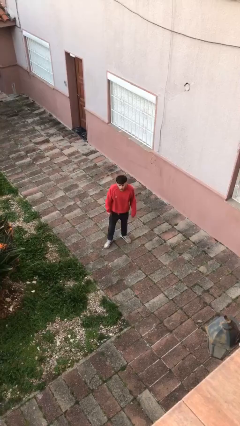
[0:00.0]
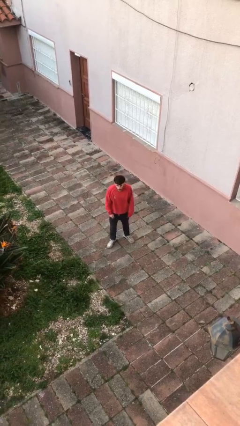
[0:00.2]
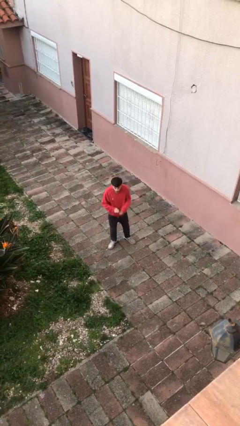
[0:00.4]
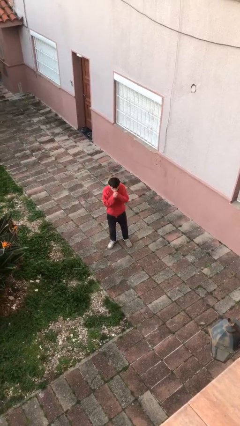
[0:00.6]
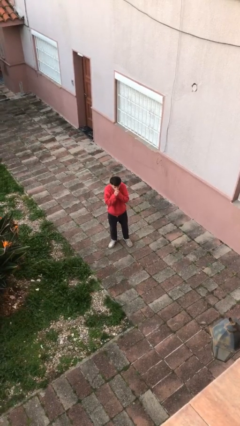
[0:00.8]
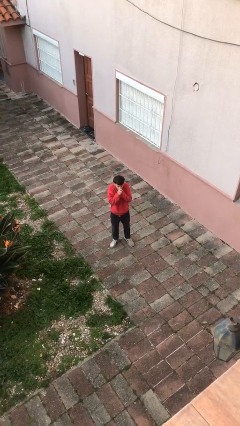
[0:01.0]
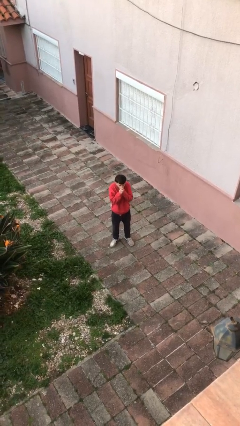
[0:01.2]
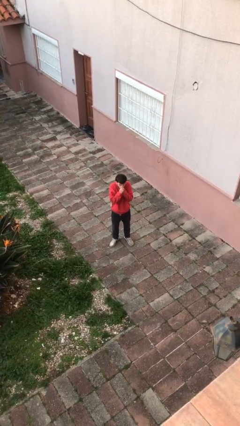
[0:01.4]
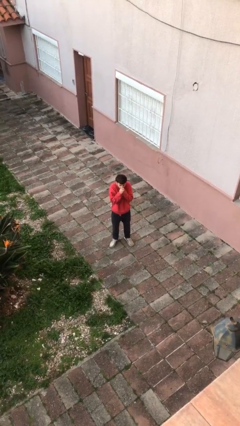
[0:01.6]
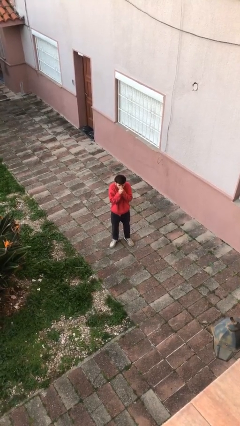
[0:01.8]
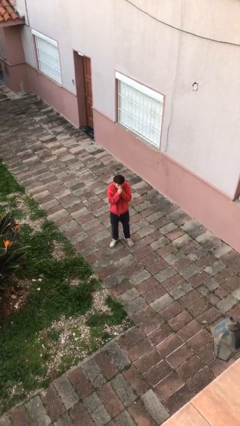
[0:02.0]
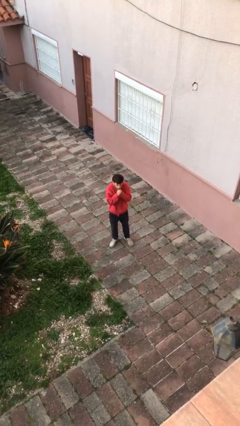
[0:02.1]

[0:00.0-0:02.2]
person blows into hands

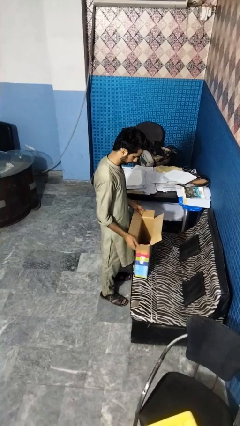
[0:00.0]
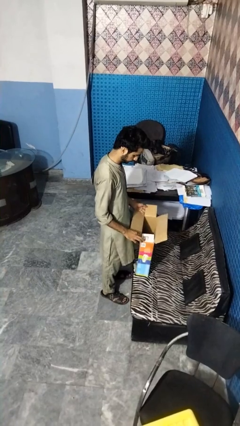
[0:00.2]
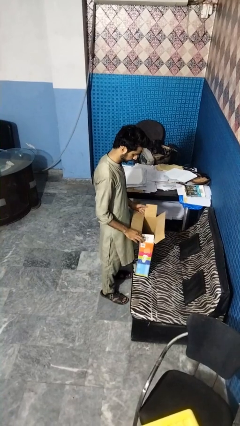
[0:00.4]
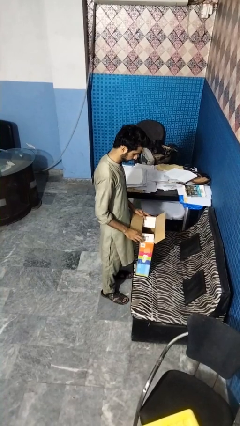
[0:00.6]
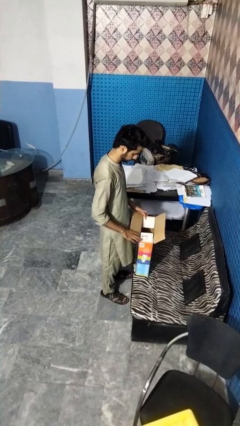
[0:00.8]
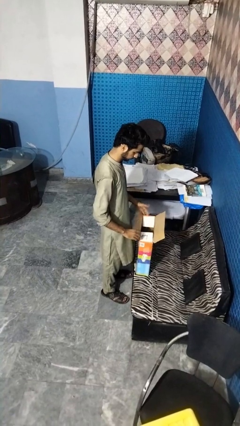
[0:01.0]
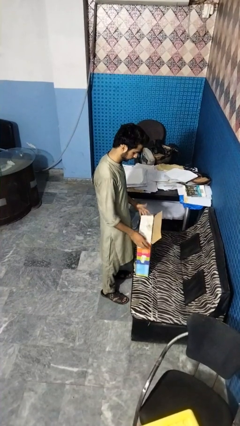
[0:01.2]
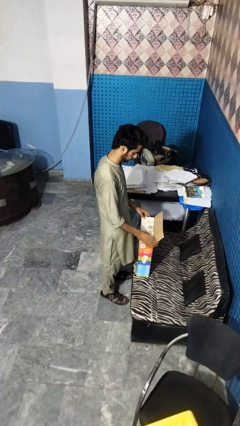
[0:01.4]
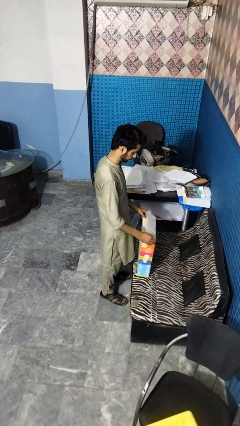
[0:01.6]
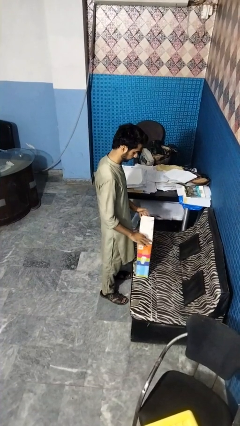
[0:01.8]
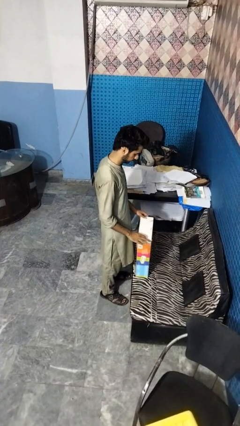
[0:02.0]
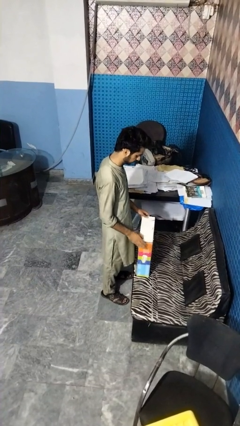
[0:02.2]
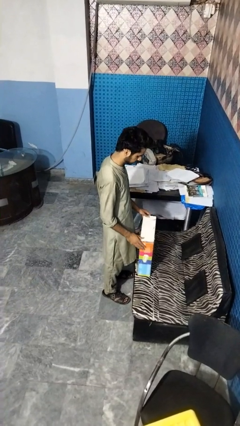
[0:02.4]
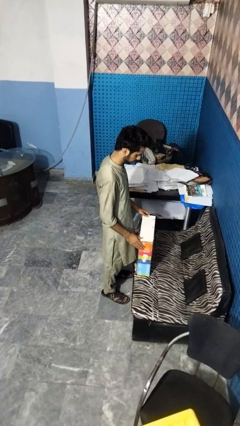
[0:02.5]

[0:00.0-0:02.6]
person closes box

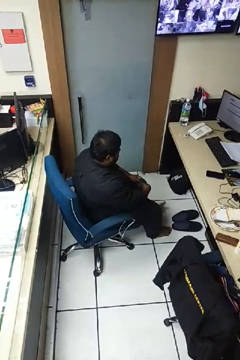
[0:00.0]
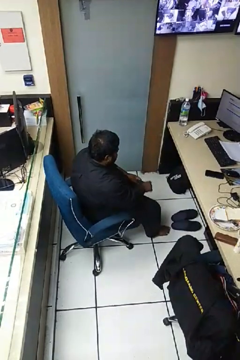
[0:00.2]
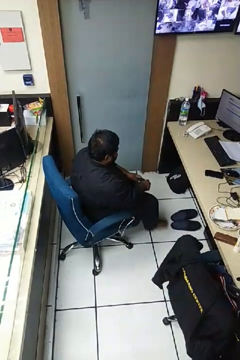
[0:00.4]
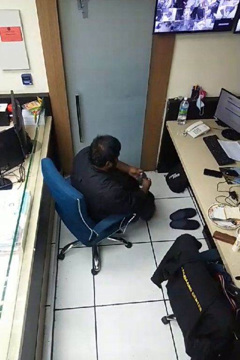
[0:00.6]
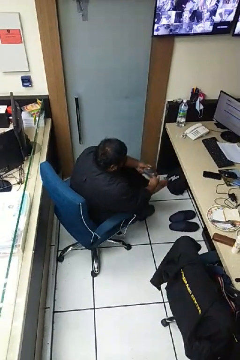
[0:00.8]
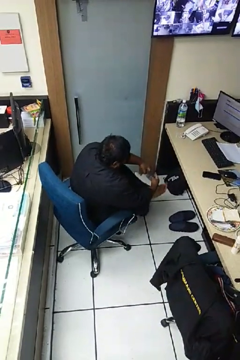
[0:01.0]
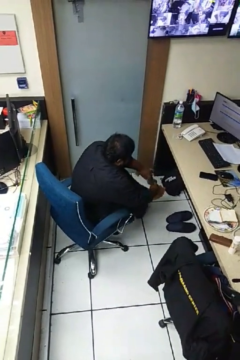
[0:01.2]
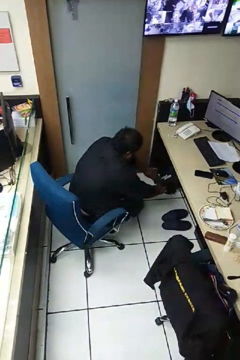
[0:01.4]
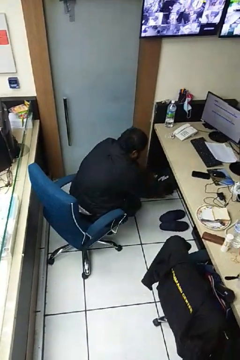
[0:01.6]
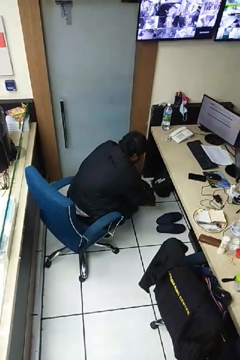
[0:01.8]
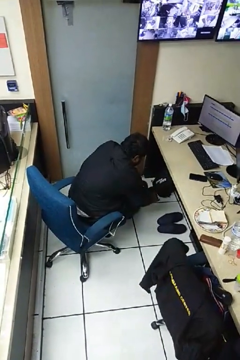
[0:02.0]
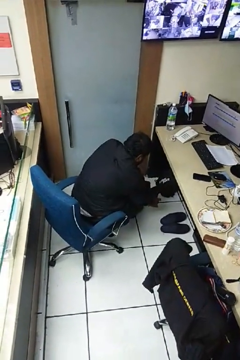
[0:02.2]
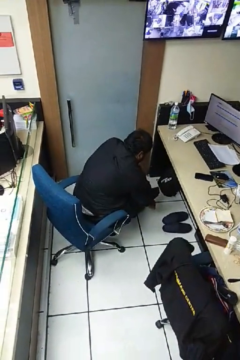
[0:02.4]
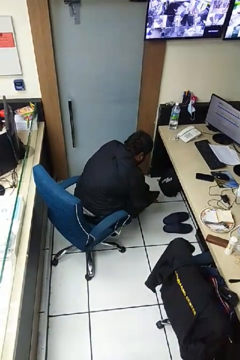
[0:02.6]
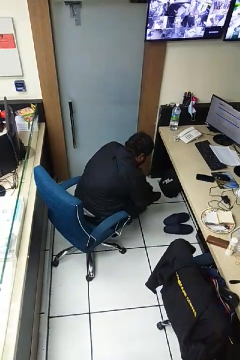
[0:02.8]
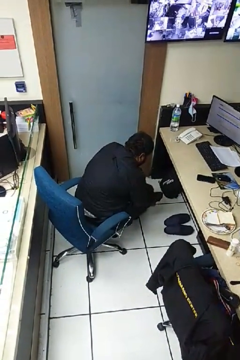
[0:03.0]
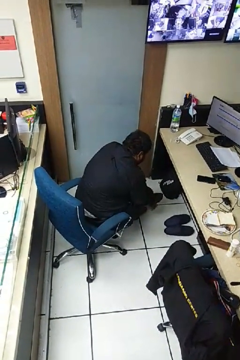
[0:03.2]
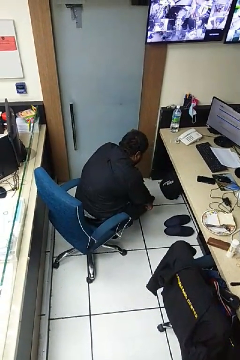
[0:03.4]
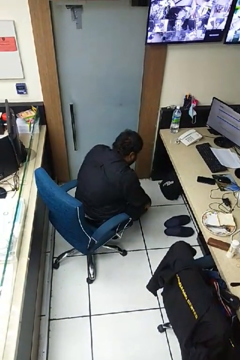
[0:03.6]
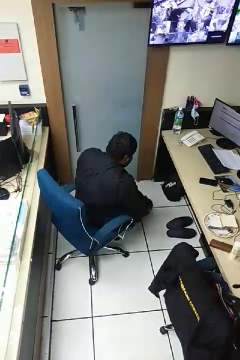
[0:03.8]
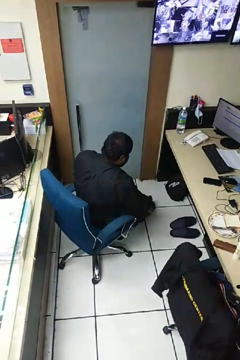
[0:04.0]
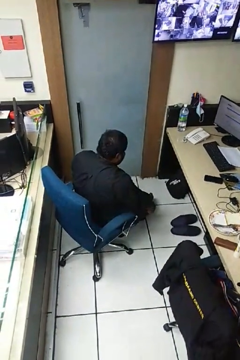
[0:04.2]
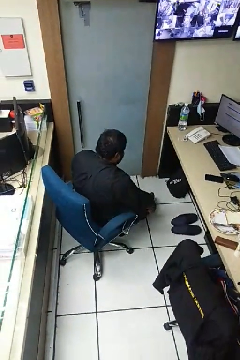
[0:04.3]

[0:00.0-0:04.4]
person puts on socks

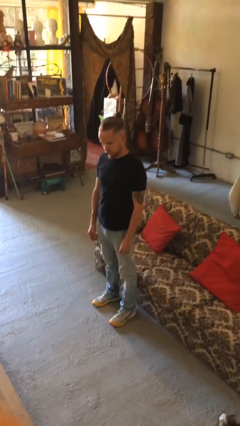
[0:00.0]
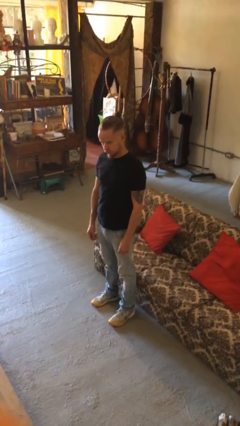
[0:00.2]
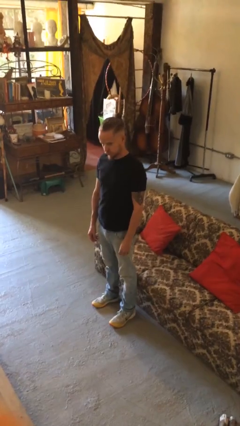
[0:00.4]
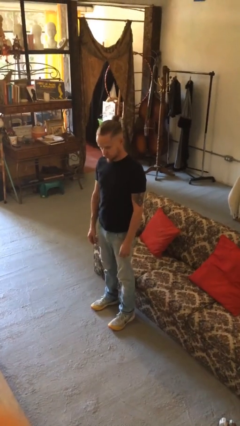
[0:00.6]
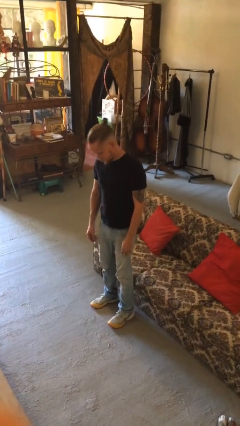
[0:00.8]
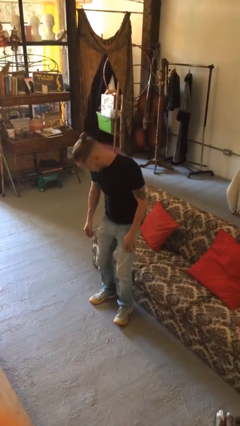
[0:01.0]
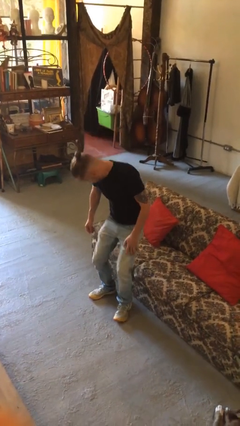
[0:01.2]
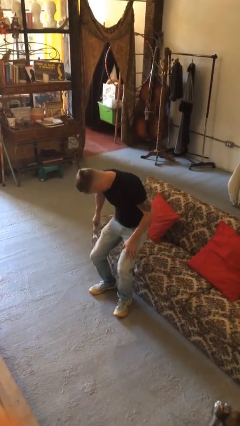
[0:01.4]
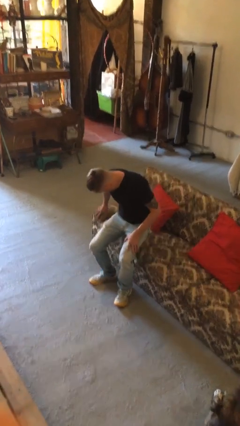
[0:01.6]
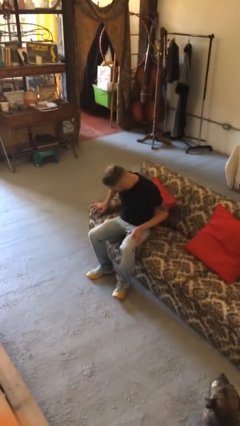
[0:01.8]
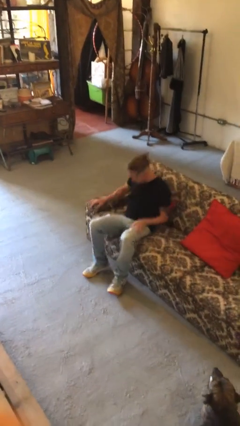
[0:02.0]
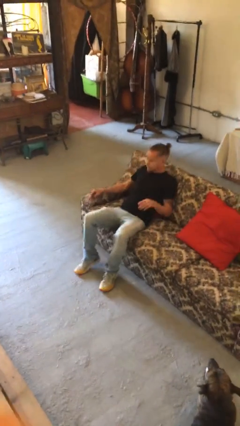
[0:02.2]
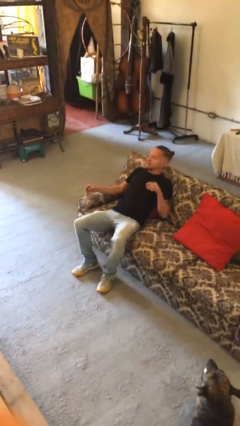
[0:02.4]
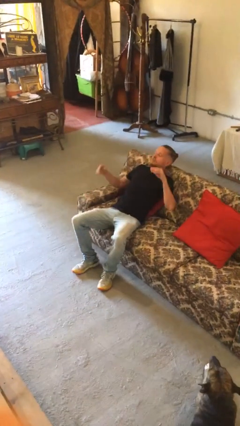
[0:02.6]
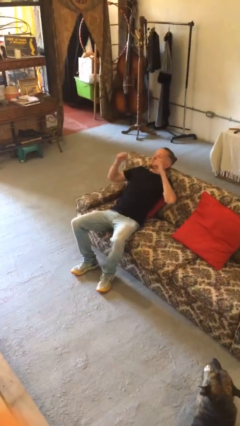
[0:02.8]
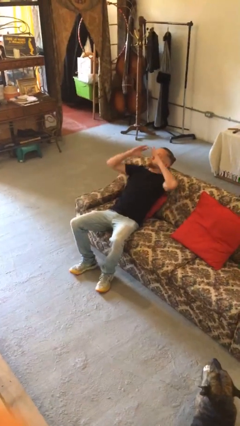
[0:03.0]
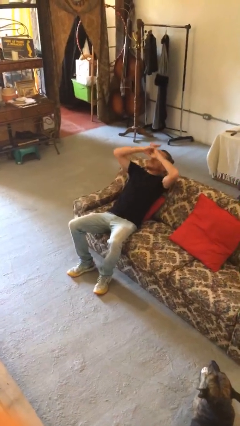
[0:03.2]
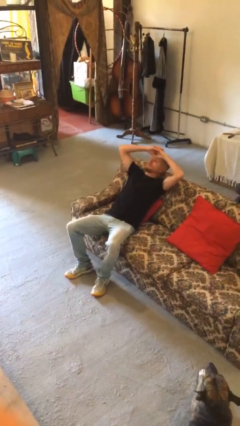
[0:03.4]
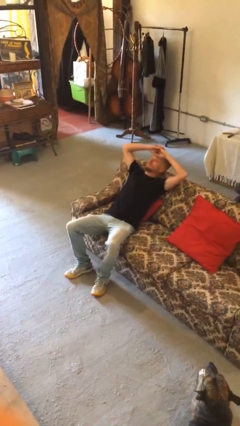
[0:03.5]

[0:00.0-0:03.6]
person lies down on couch

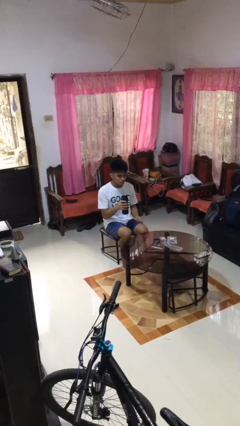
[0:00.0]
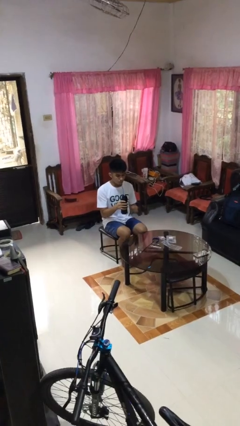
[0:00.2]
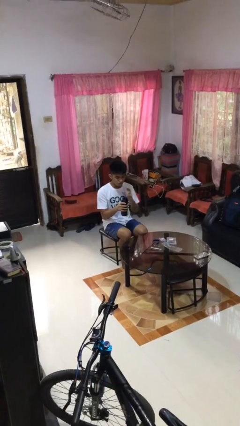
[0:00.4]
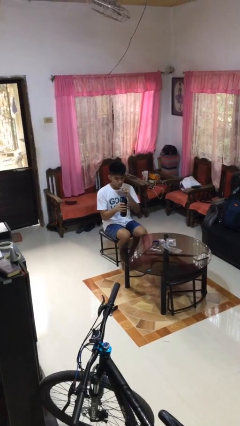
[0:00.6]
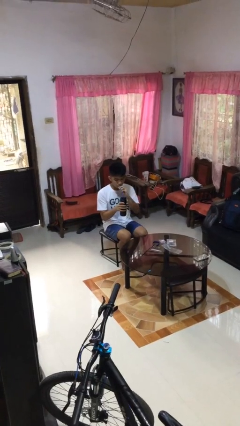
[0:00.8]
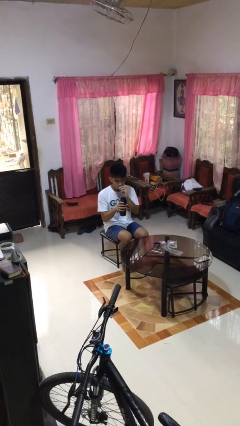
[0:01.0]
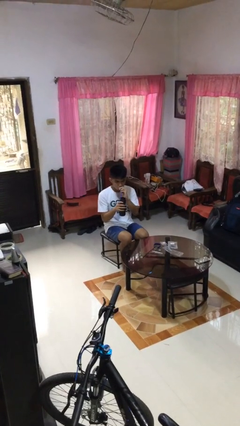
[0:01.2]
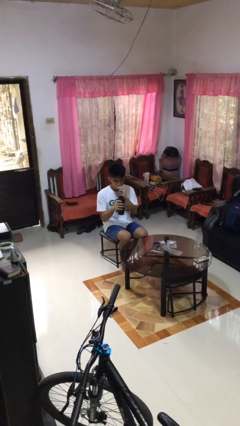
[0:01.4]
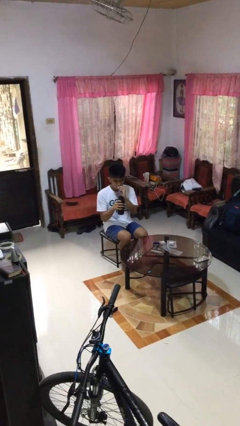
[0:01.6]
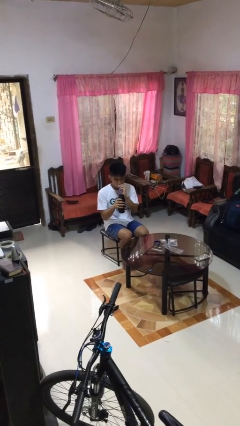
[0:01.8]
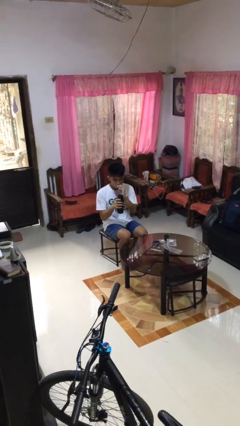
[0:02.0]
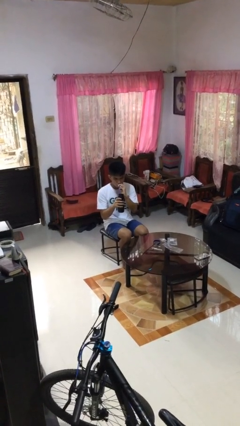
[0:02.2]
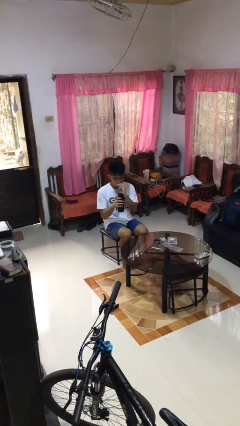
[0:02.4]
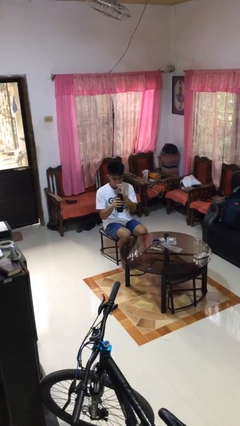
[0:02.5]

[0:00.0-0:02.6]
person drinks from straw

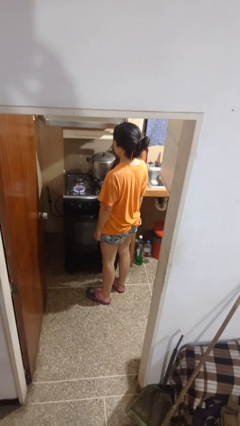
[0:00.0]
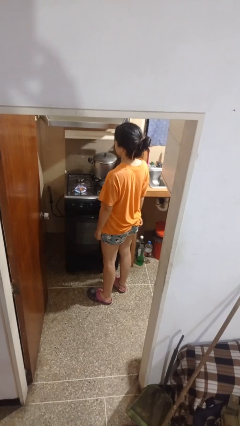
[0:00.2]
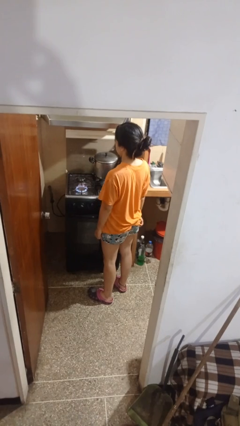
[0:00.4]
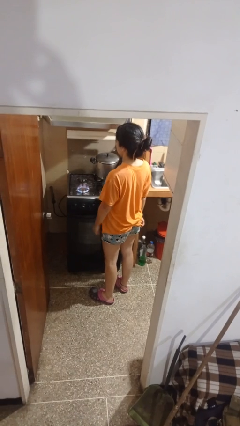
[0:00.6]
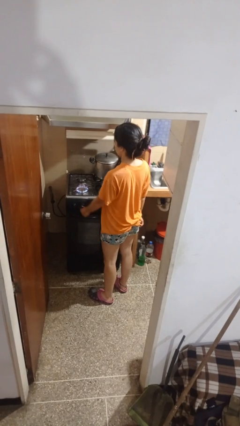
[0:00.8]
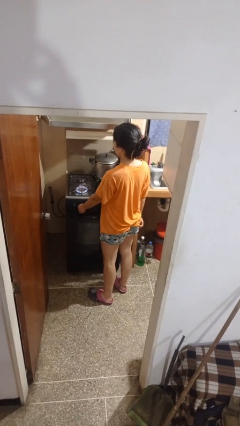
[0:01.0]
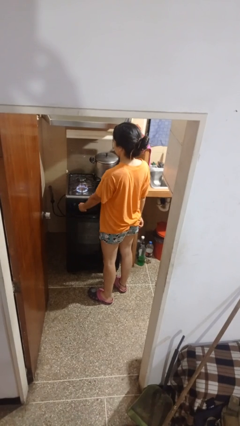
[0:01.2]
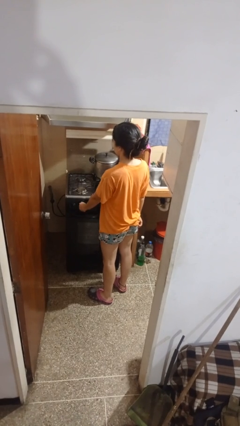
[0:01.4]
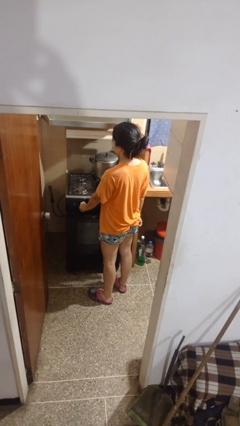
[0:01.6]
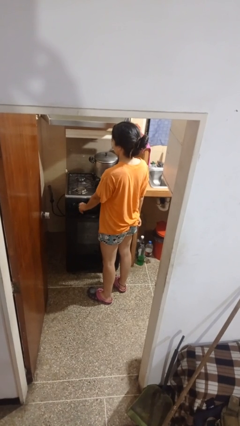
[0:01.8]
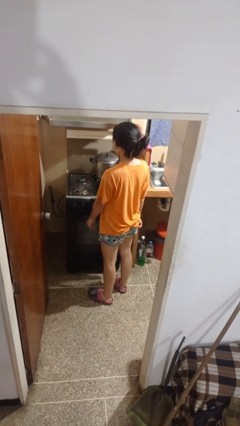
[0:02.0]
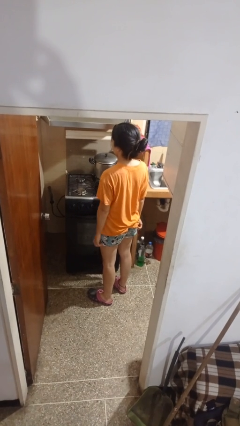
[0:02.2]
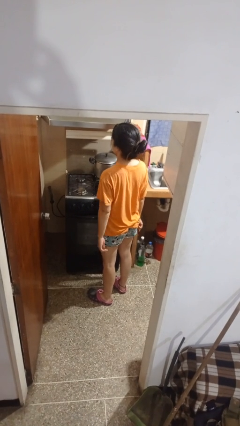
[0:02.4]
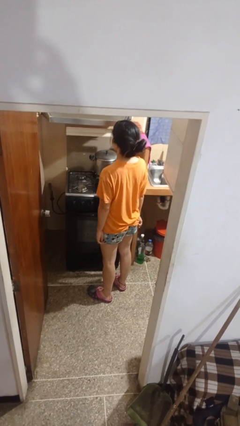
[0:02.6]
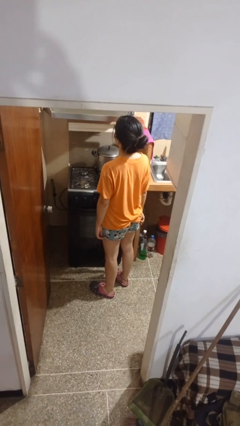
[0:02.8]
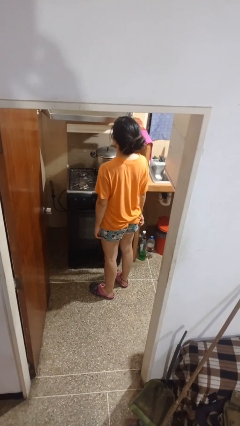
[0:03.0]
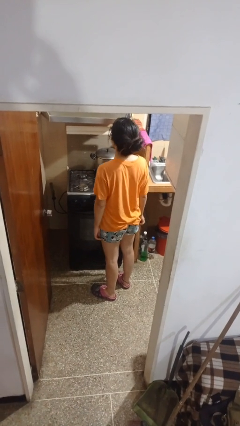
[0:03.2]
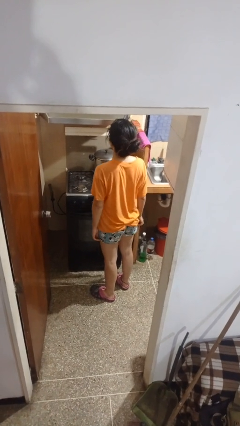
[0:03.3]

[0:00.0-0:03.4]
person turns off stovetop
